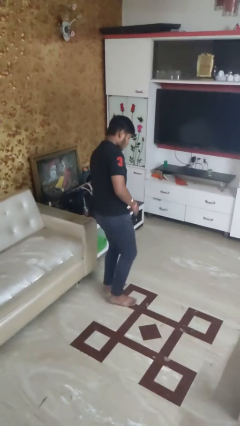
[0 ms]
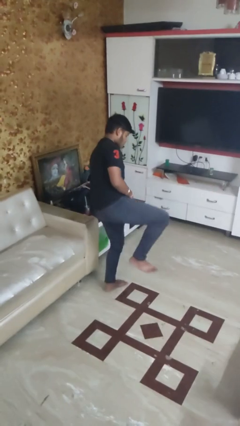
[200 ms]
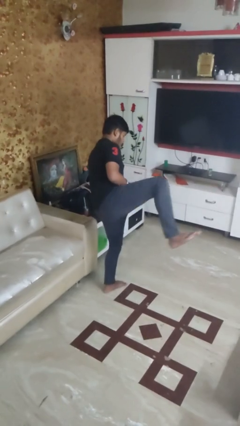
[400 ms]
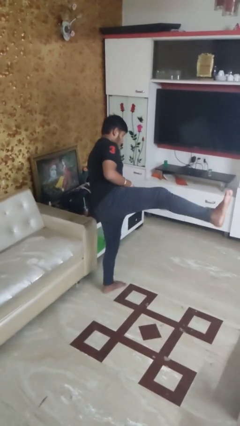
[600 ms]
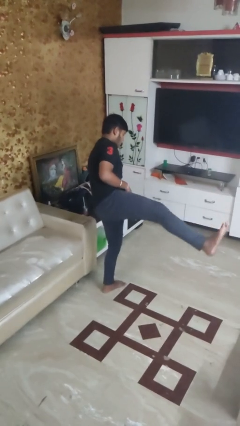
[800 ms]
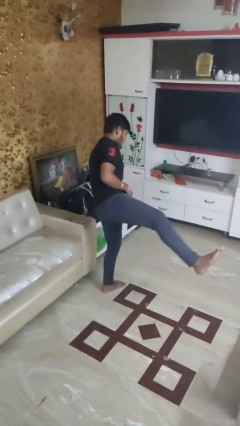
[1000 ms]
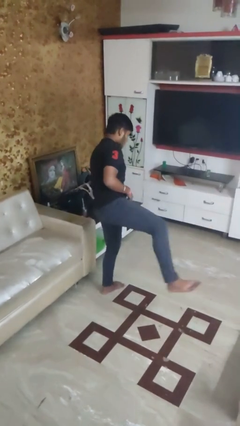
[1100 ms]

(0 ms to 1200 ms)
person karate kicks

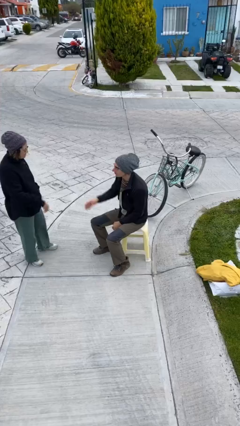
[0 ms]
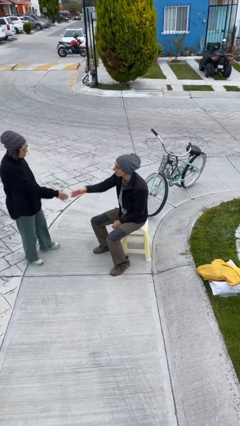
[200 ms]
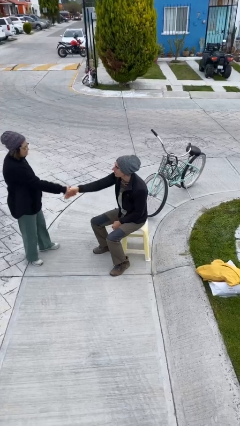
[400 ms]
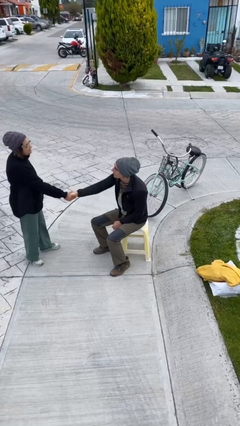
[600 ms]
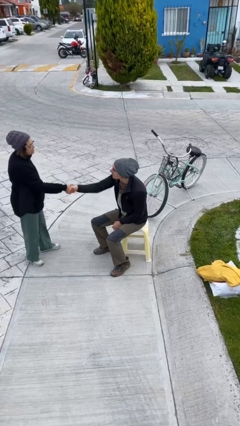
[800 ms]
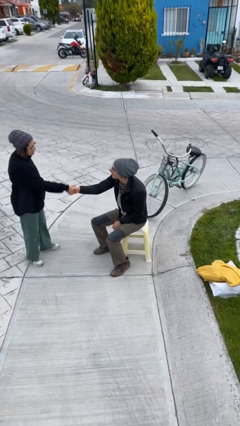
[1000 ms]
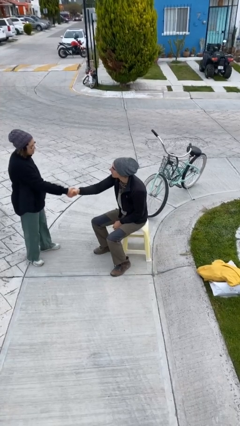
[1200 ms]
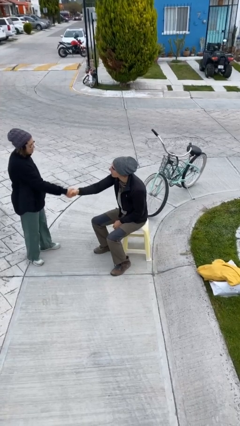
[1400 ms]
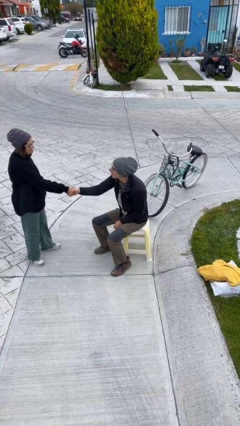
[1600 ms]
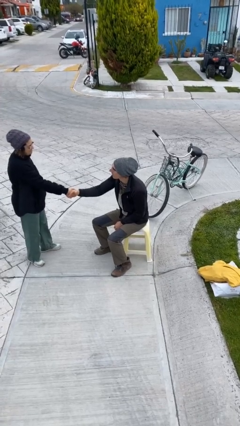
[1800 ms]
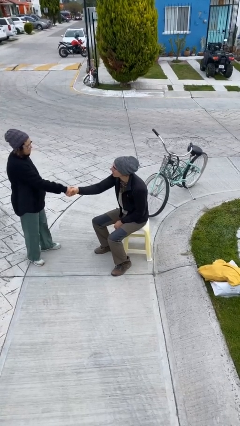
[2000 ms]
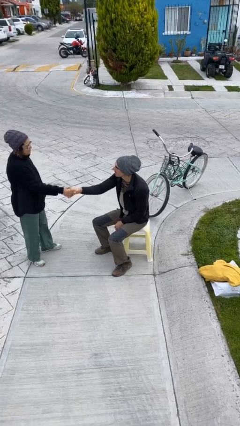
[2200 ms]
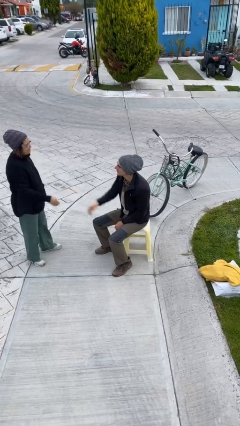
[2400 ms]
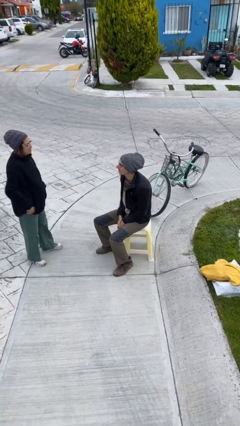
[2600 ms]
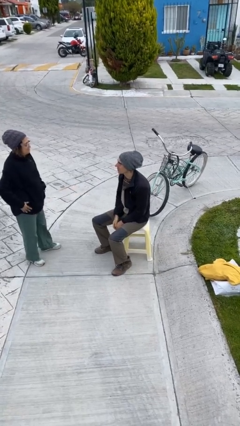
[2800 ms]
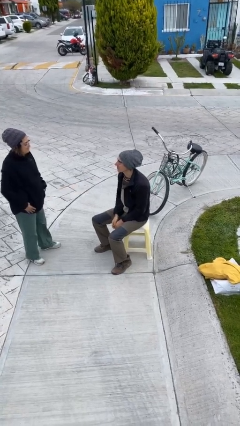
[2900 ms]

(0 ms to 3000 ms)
person shakes hand

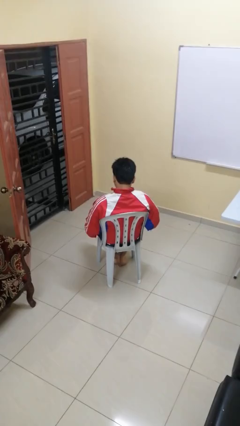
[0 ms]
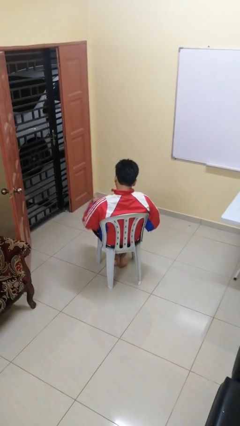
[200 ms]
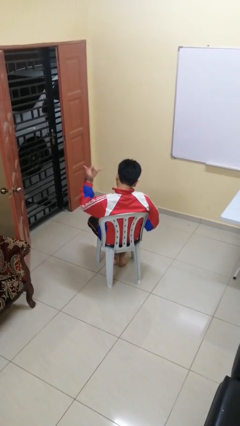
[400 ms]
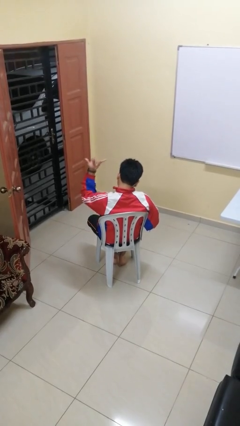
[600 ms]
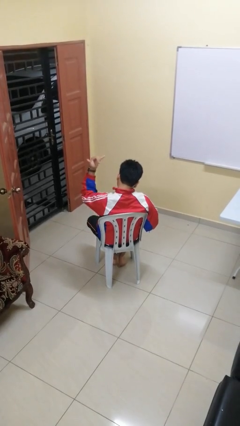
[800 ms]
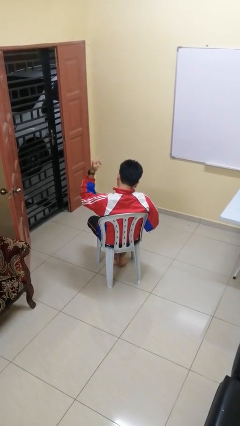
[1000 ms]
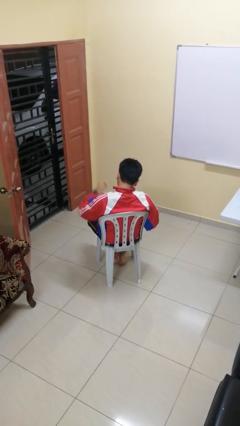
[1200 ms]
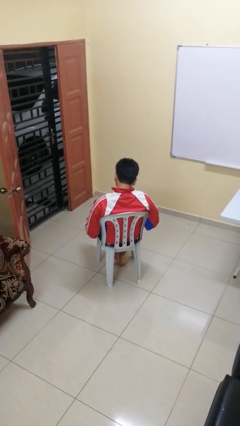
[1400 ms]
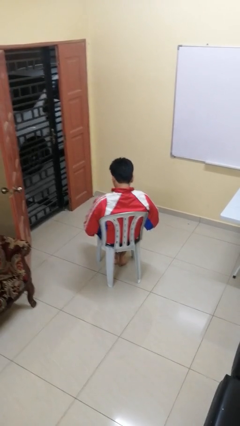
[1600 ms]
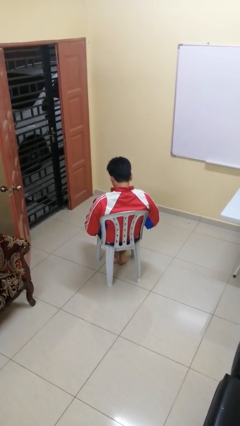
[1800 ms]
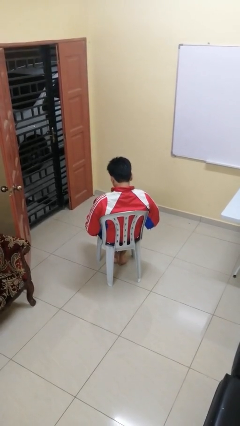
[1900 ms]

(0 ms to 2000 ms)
person gestures hang loose

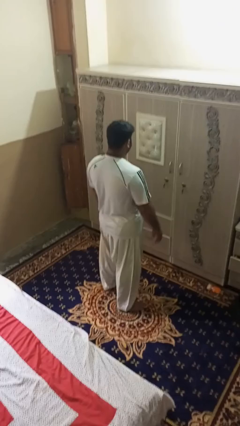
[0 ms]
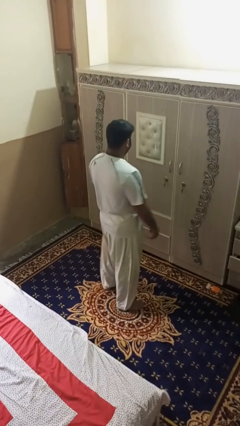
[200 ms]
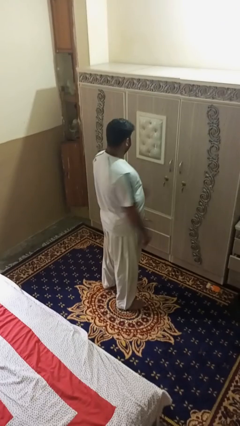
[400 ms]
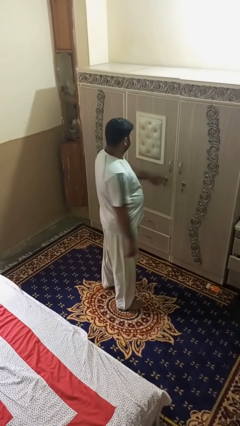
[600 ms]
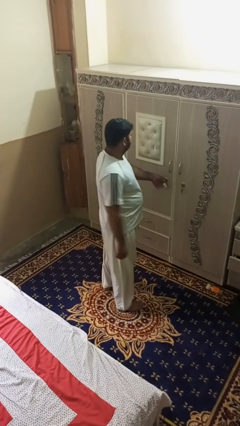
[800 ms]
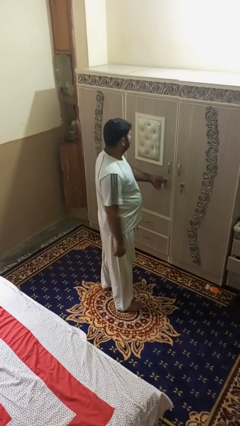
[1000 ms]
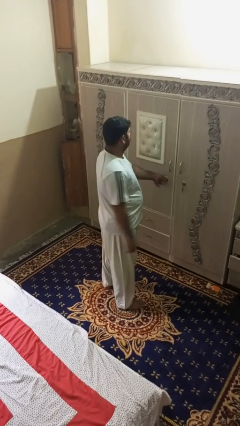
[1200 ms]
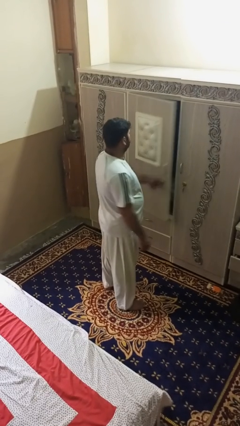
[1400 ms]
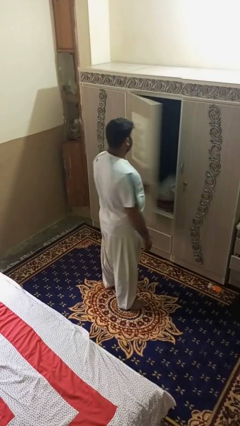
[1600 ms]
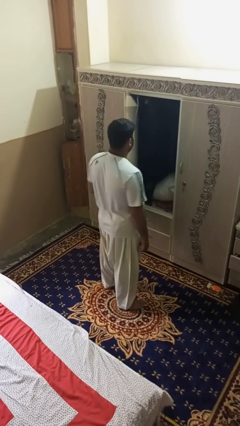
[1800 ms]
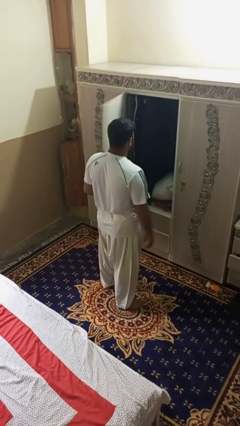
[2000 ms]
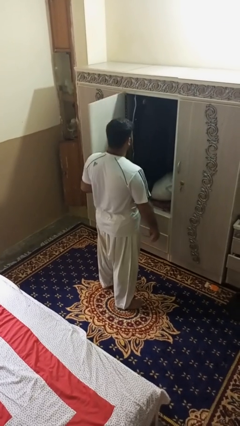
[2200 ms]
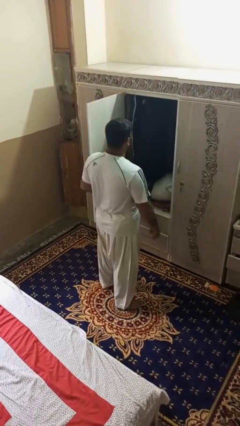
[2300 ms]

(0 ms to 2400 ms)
person opens dresser drawer

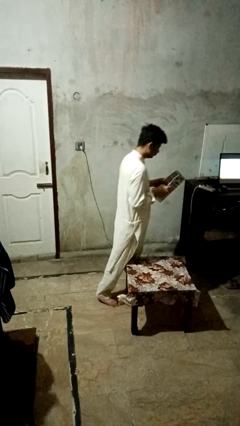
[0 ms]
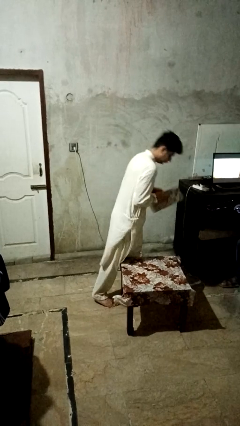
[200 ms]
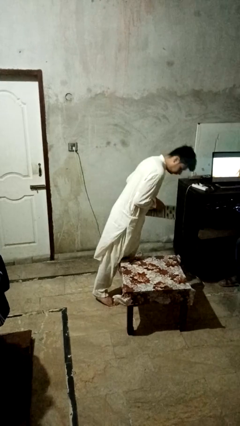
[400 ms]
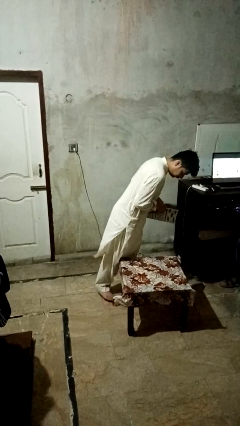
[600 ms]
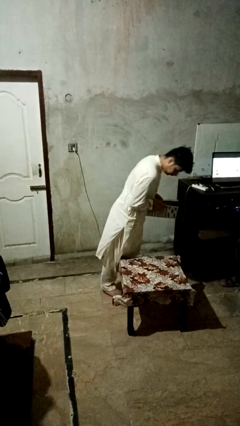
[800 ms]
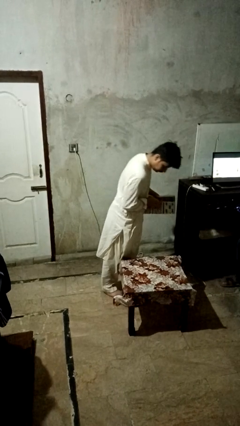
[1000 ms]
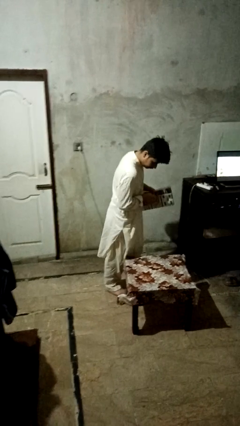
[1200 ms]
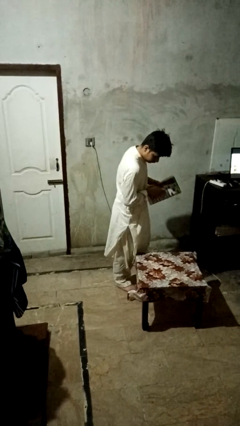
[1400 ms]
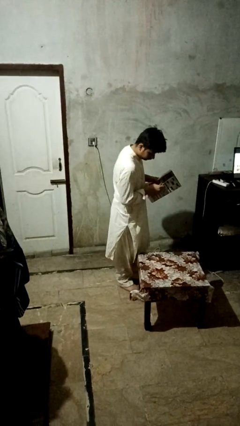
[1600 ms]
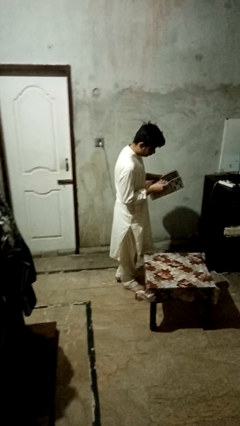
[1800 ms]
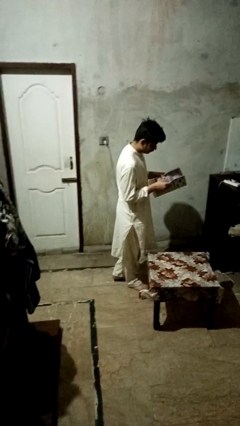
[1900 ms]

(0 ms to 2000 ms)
person bumps into table

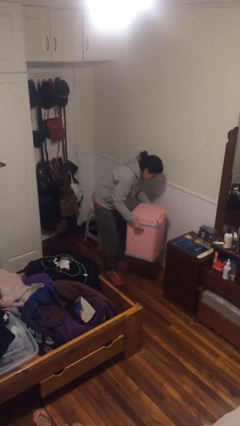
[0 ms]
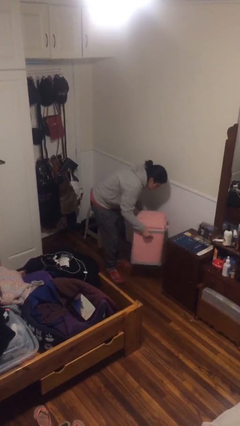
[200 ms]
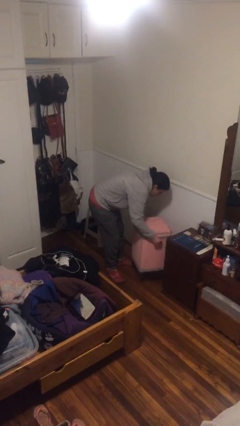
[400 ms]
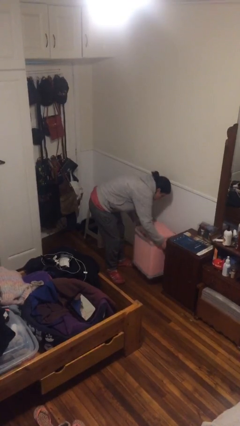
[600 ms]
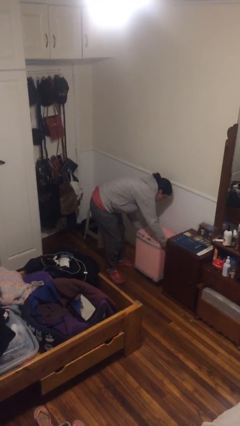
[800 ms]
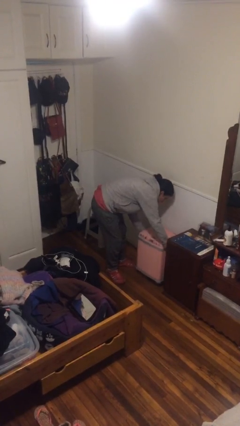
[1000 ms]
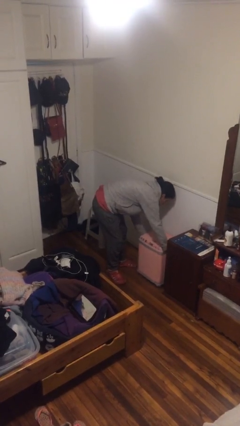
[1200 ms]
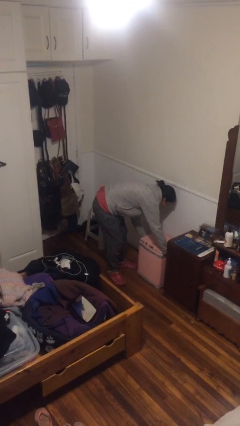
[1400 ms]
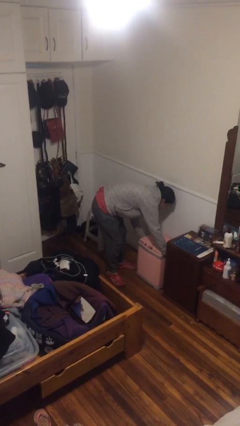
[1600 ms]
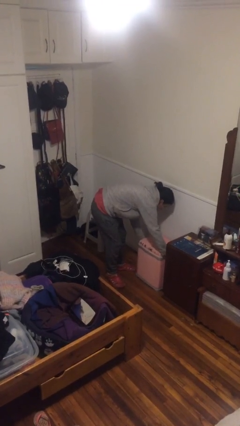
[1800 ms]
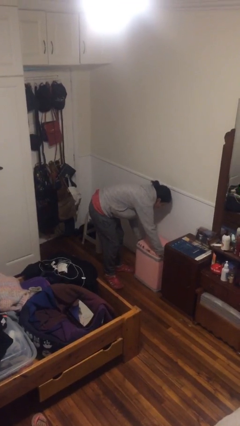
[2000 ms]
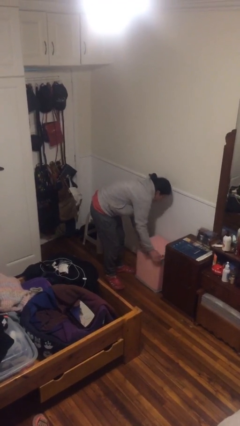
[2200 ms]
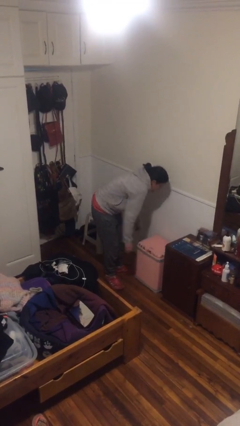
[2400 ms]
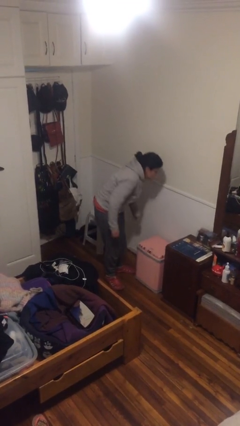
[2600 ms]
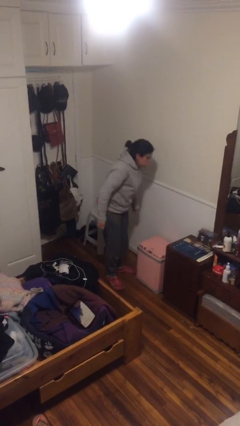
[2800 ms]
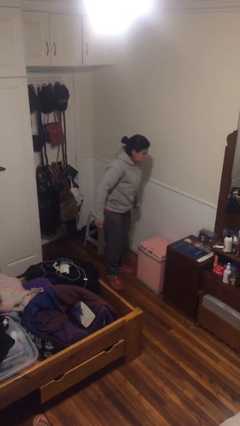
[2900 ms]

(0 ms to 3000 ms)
person puts down object on floor

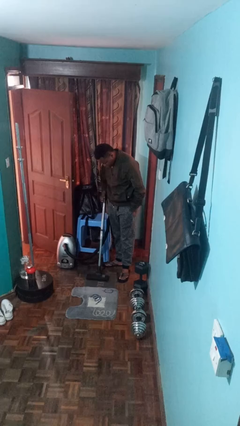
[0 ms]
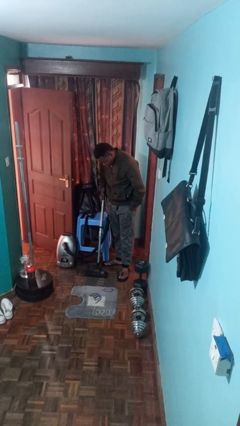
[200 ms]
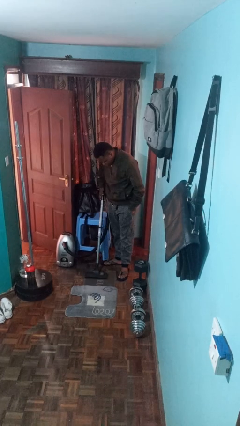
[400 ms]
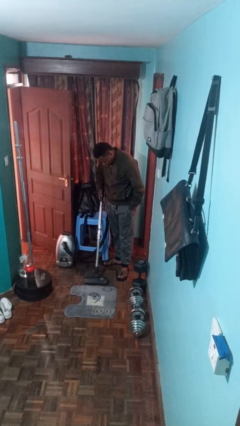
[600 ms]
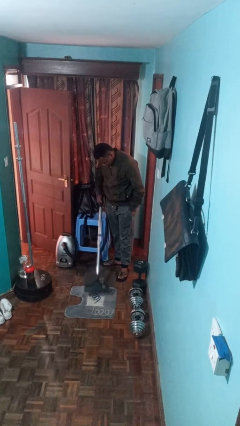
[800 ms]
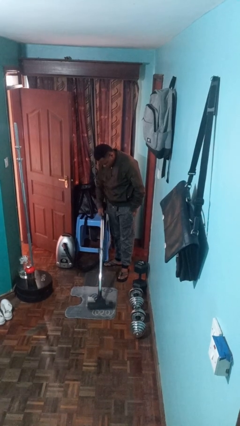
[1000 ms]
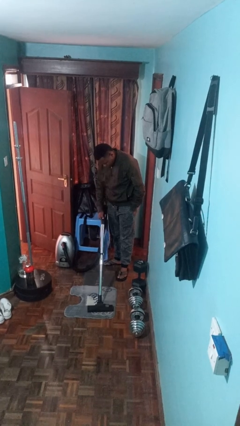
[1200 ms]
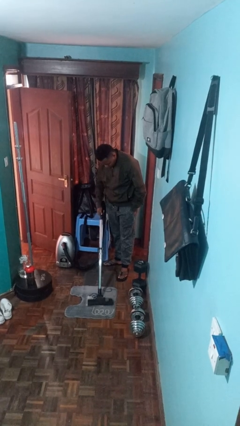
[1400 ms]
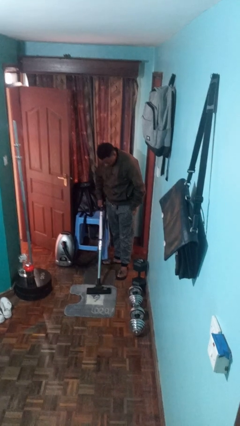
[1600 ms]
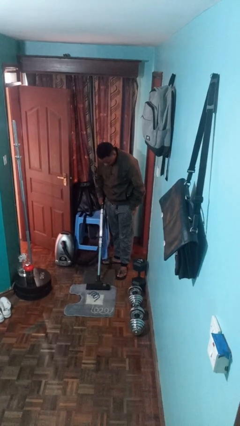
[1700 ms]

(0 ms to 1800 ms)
person vacuums carpet

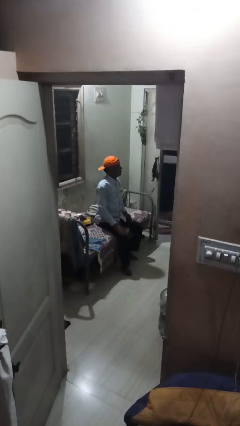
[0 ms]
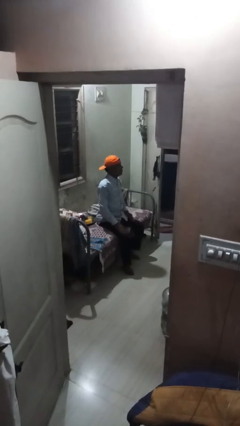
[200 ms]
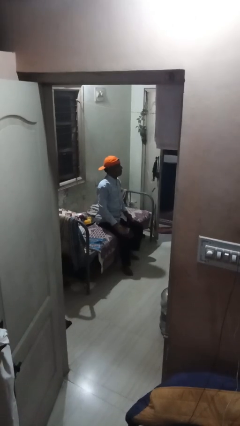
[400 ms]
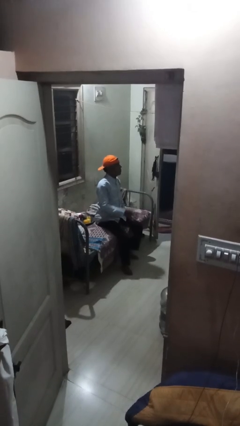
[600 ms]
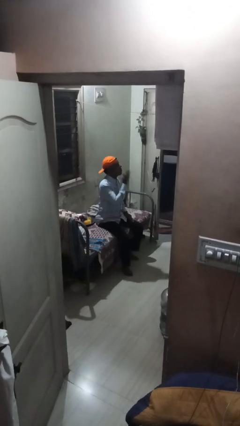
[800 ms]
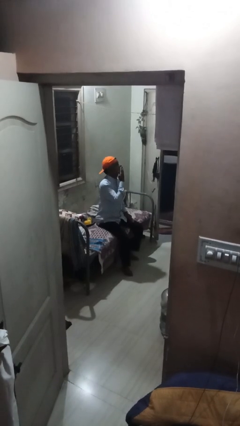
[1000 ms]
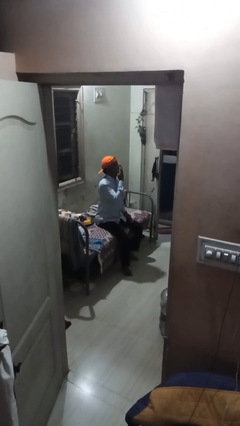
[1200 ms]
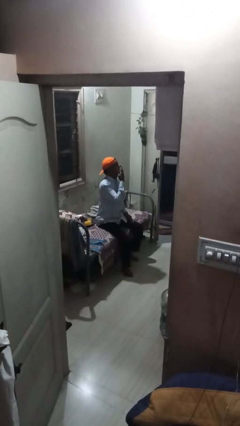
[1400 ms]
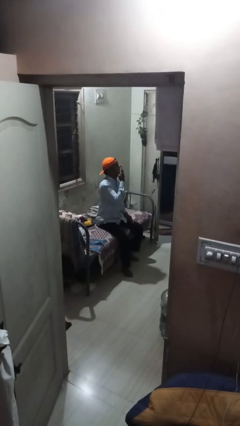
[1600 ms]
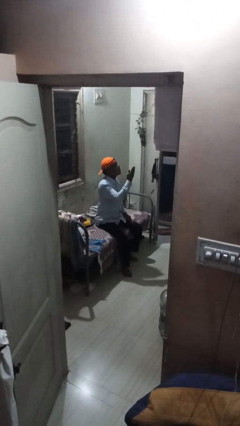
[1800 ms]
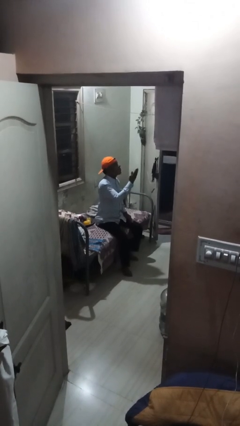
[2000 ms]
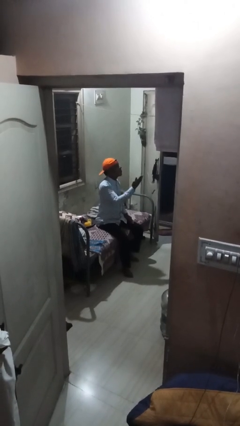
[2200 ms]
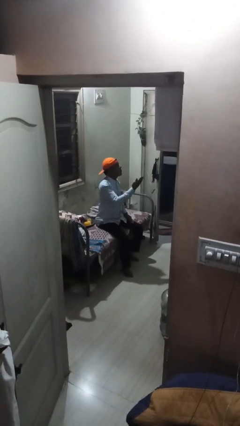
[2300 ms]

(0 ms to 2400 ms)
person gestures blow kiss
